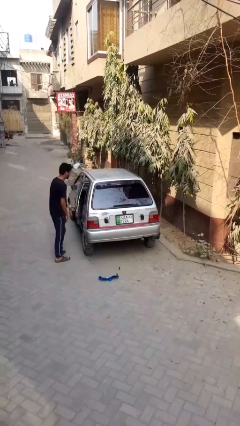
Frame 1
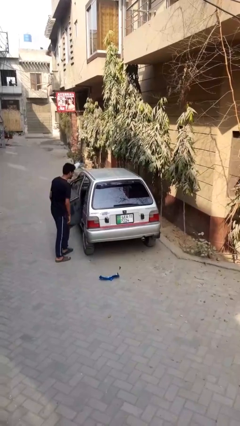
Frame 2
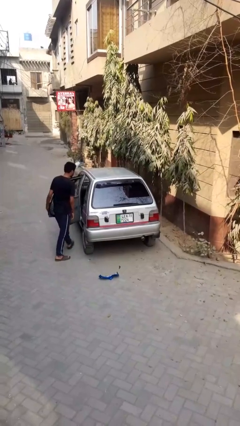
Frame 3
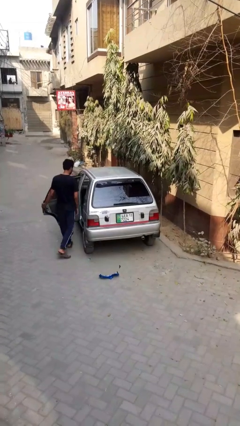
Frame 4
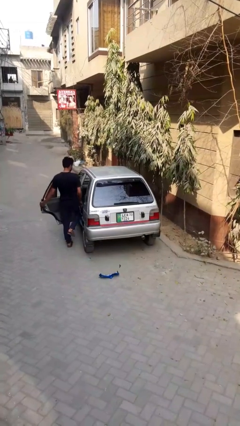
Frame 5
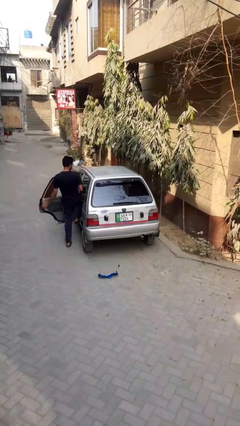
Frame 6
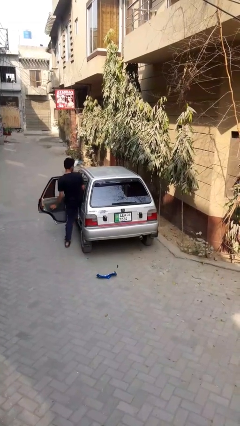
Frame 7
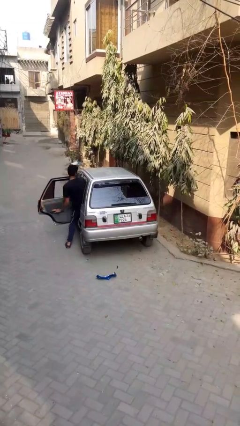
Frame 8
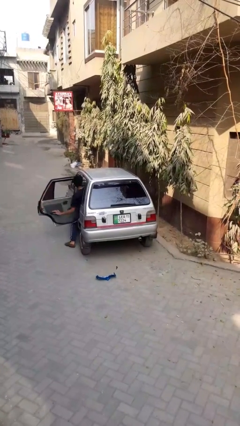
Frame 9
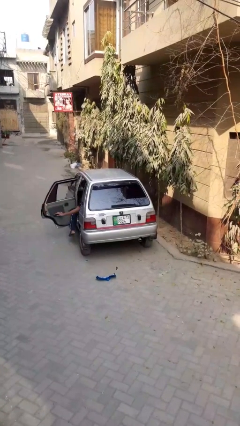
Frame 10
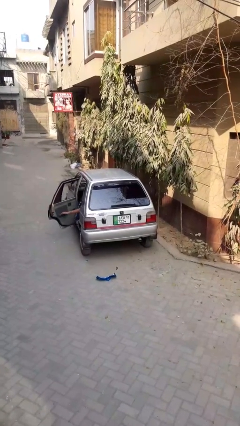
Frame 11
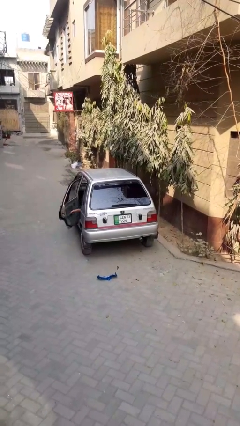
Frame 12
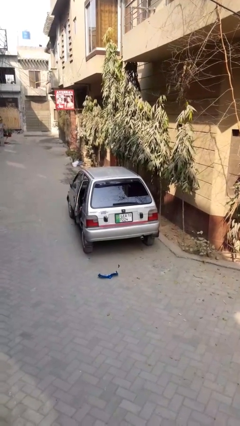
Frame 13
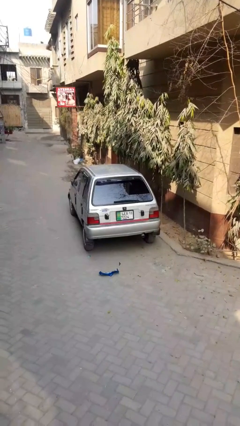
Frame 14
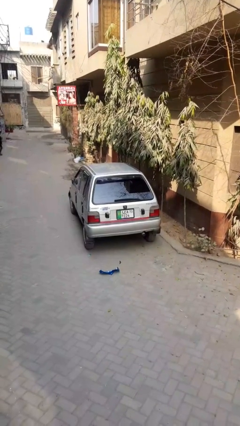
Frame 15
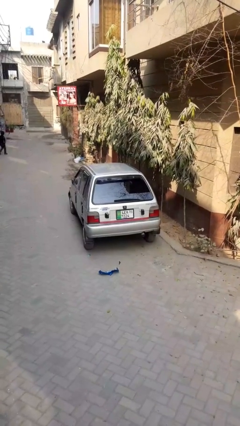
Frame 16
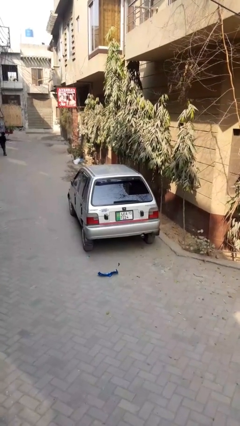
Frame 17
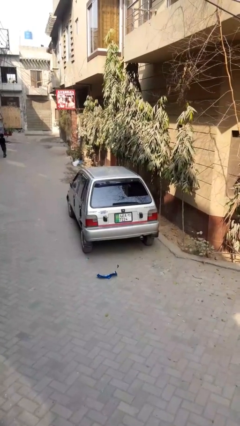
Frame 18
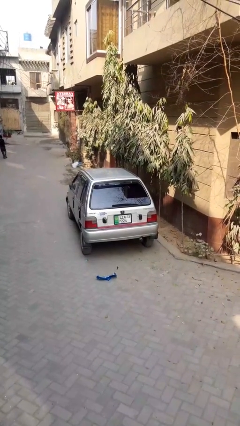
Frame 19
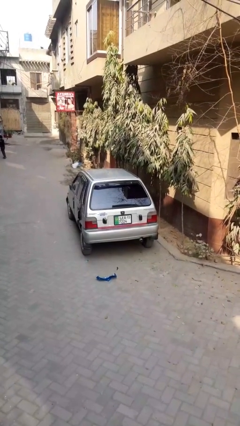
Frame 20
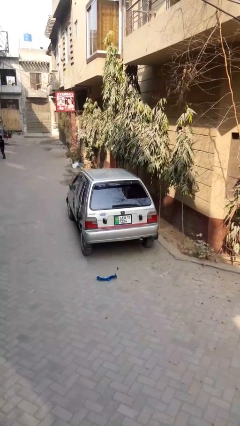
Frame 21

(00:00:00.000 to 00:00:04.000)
car picks up person

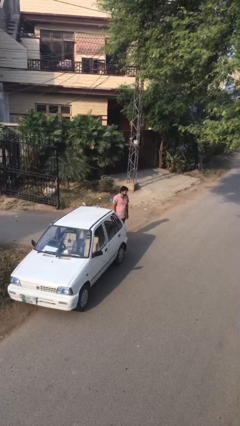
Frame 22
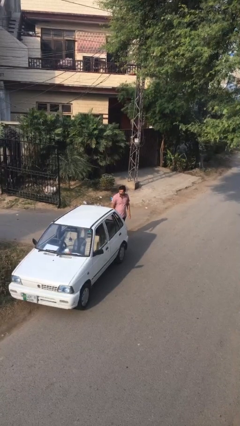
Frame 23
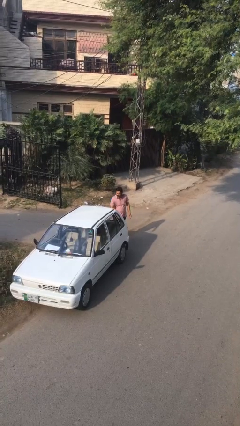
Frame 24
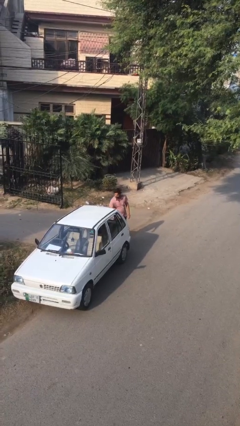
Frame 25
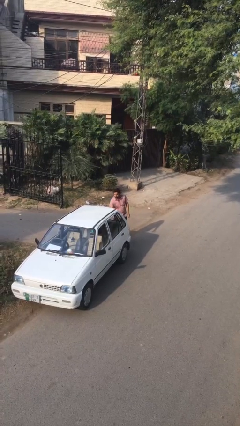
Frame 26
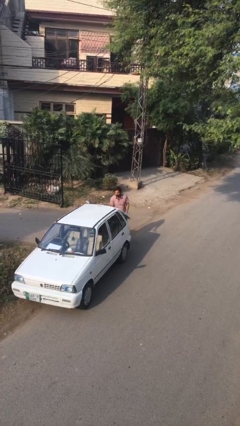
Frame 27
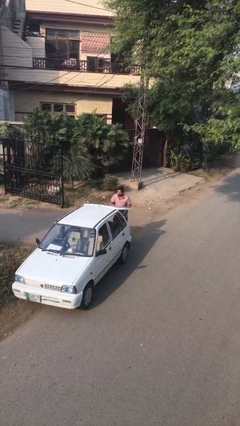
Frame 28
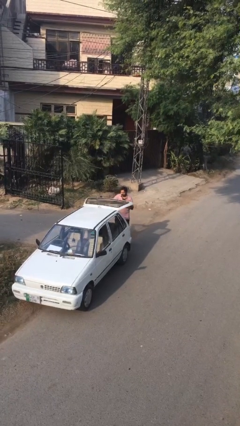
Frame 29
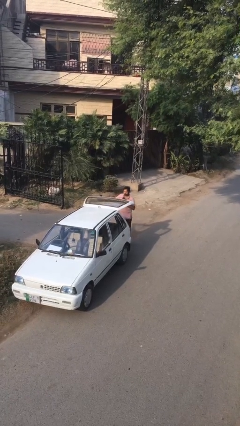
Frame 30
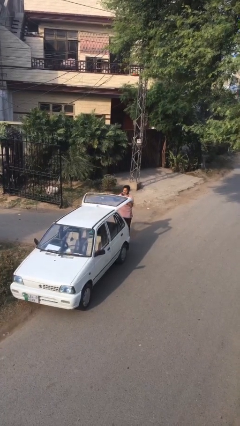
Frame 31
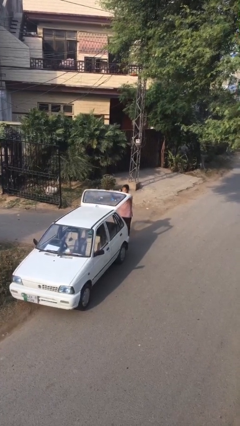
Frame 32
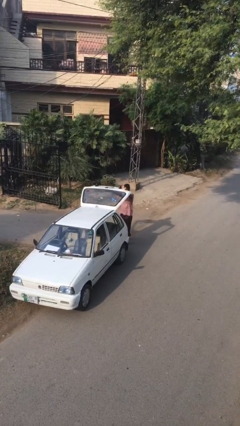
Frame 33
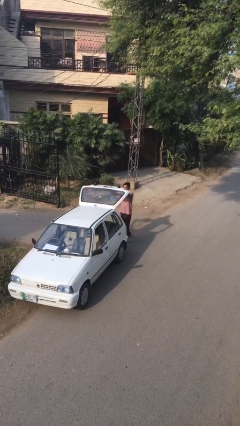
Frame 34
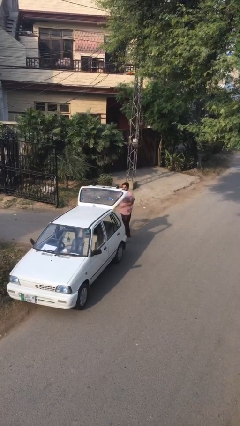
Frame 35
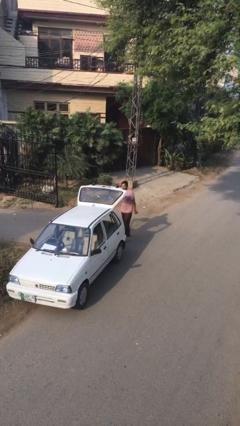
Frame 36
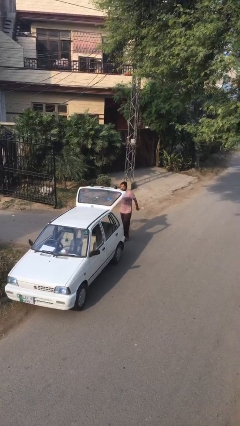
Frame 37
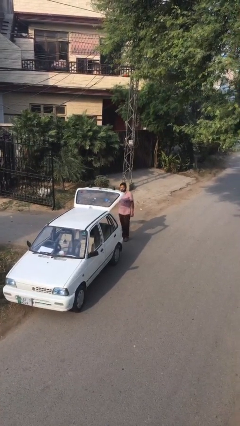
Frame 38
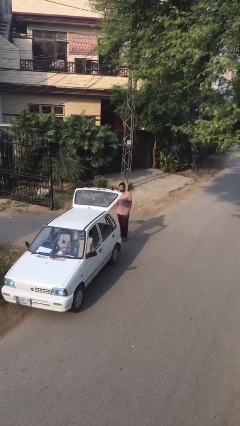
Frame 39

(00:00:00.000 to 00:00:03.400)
person opens car trunk

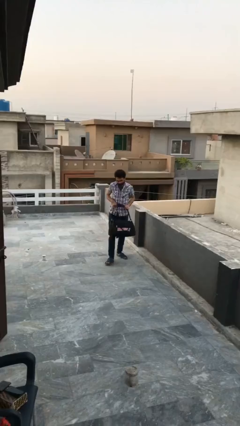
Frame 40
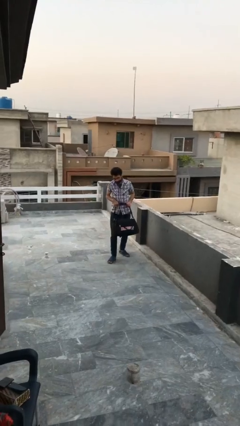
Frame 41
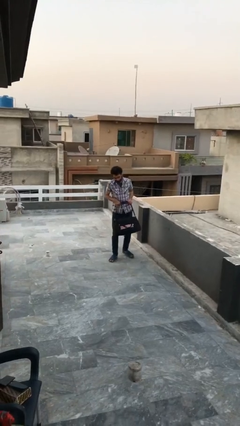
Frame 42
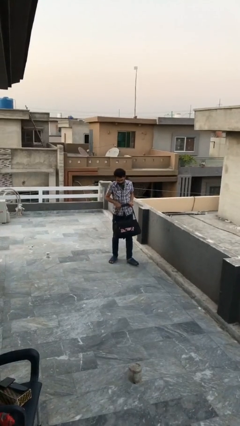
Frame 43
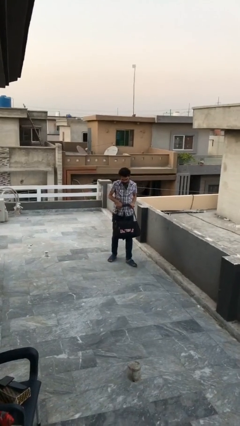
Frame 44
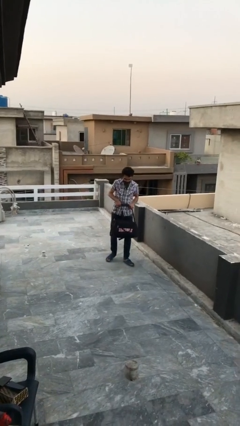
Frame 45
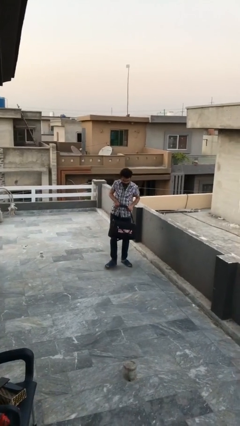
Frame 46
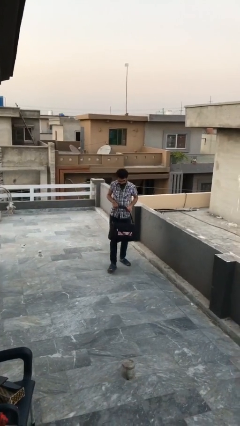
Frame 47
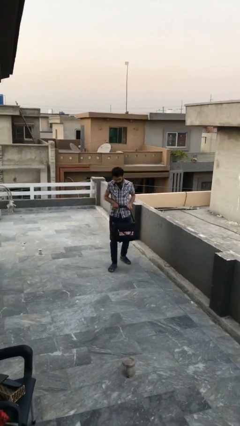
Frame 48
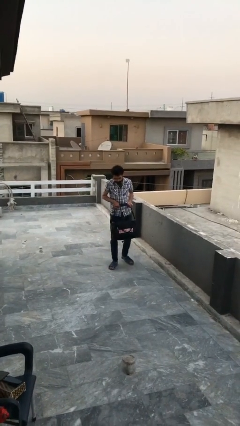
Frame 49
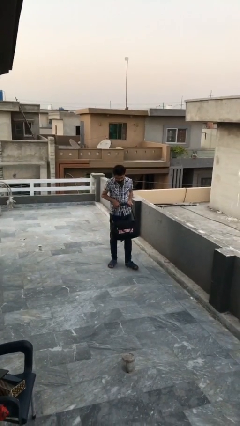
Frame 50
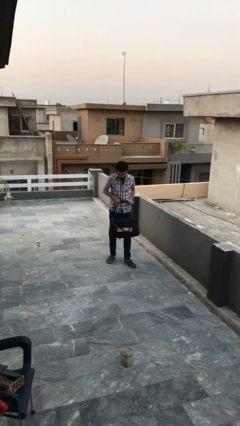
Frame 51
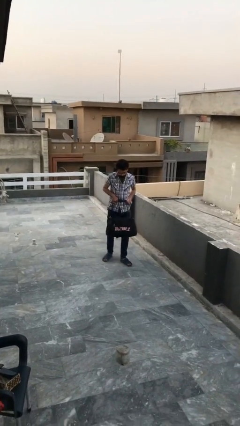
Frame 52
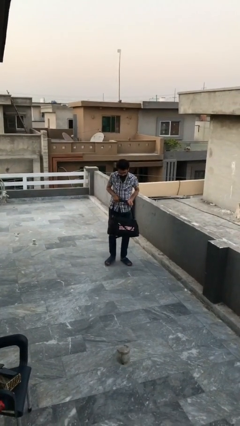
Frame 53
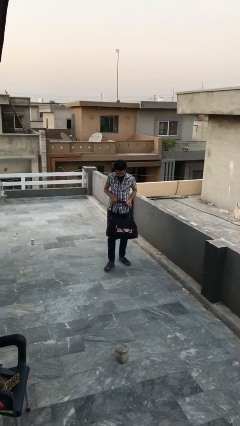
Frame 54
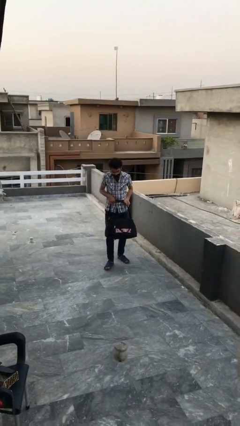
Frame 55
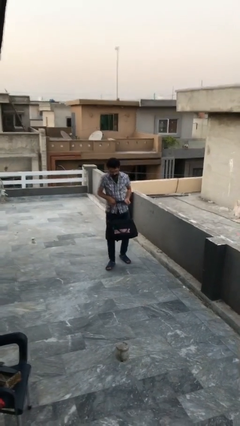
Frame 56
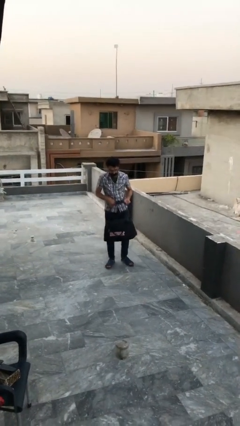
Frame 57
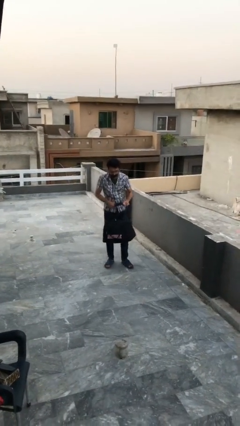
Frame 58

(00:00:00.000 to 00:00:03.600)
person carries heavy object

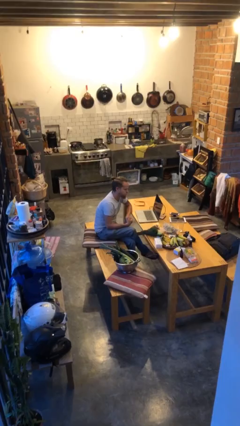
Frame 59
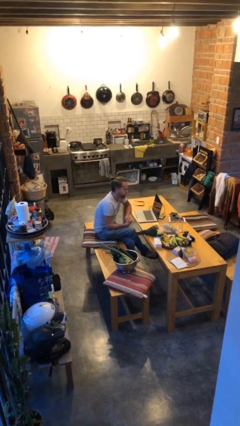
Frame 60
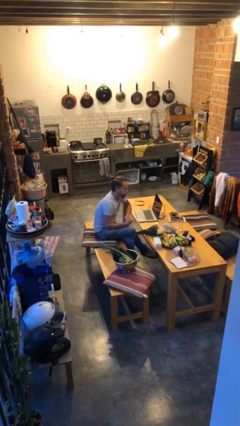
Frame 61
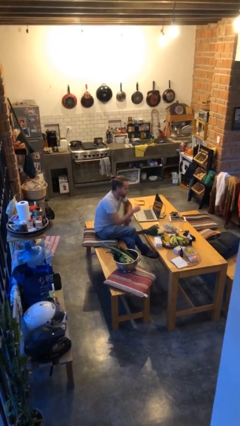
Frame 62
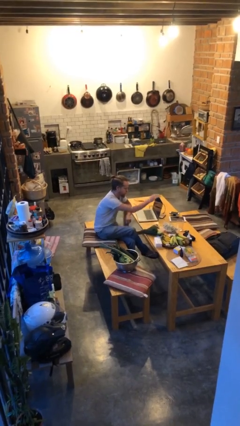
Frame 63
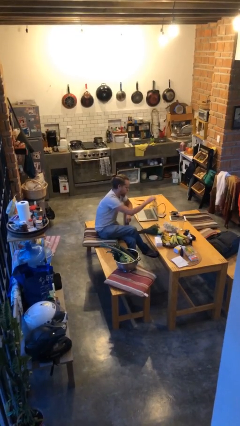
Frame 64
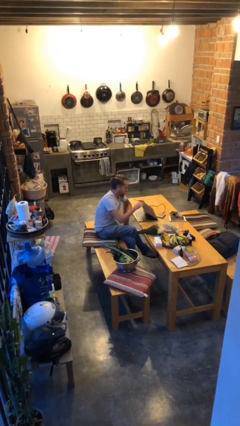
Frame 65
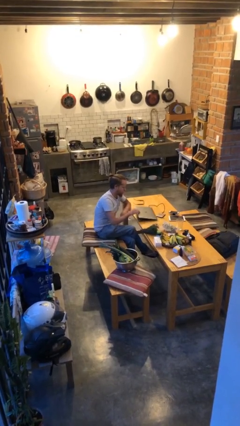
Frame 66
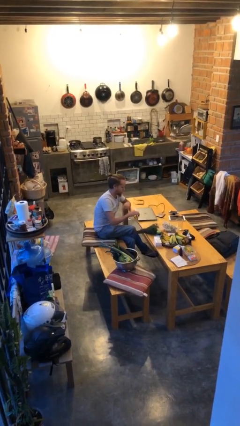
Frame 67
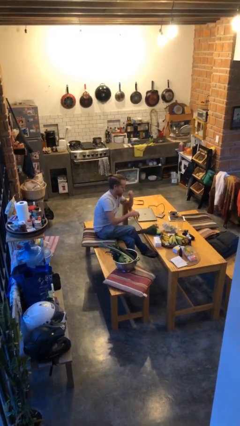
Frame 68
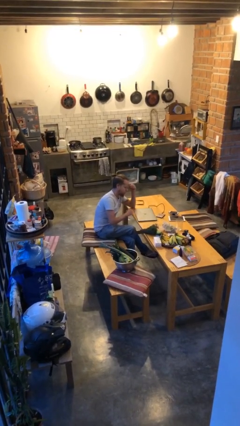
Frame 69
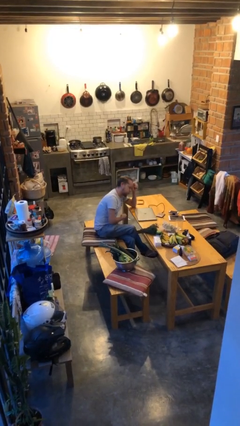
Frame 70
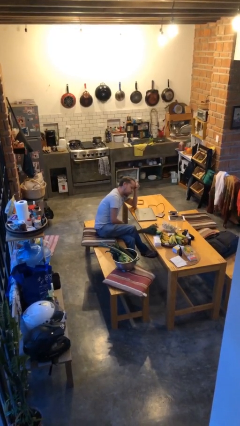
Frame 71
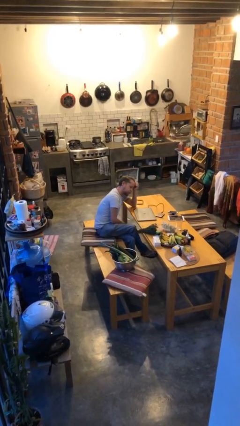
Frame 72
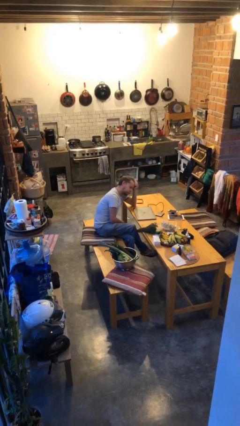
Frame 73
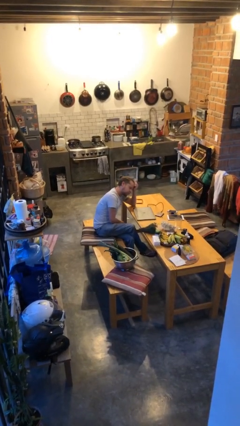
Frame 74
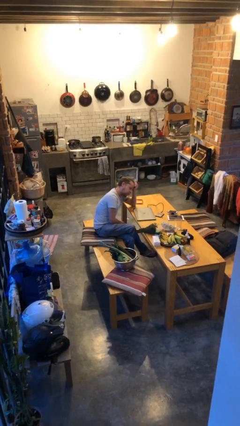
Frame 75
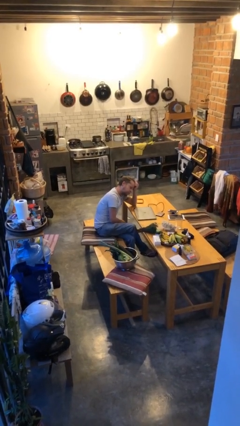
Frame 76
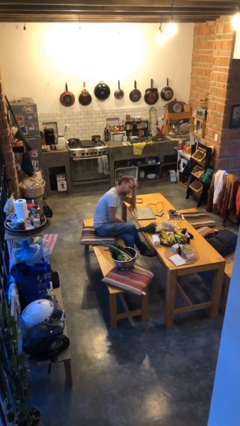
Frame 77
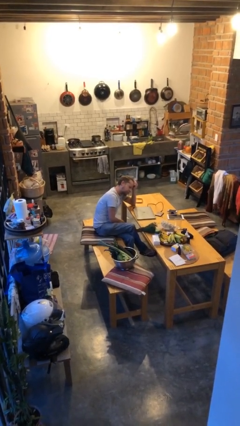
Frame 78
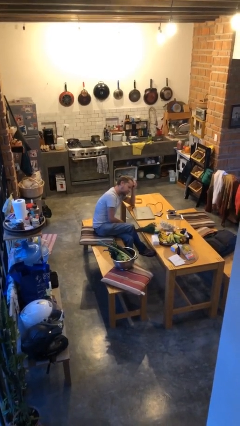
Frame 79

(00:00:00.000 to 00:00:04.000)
person closes laptop

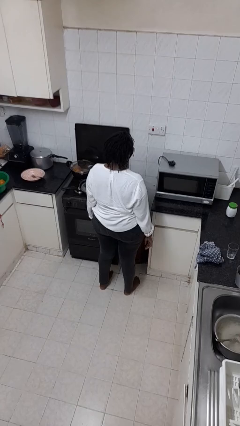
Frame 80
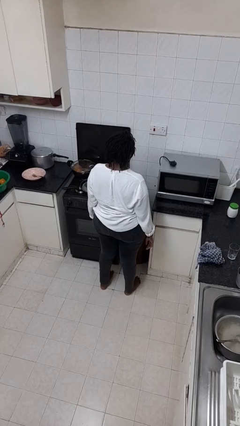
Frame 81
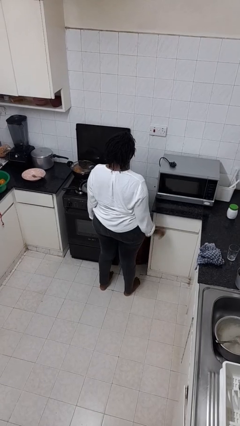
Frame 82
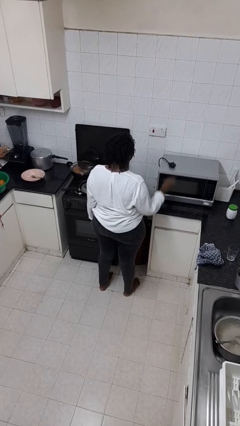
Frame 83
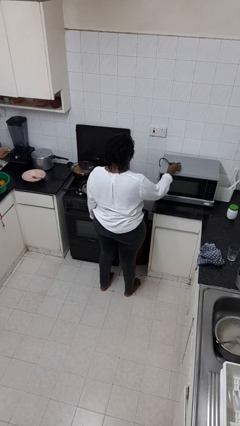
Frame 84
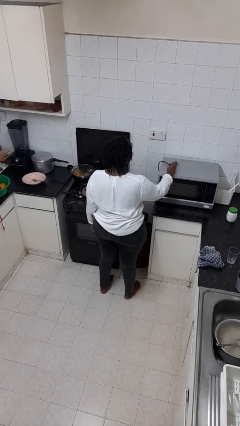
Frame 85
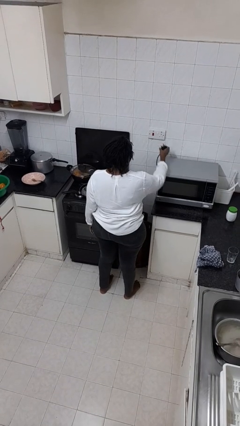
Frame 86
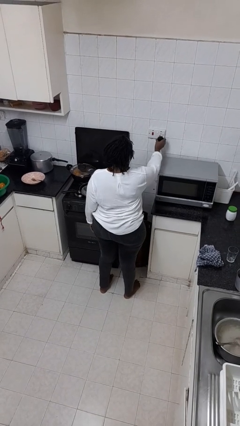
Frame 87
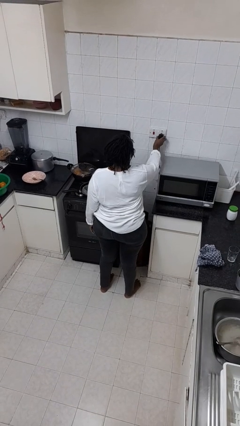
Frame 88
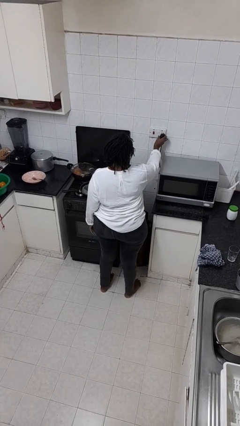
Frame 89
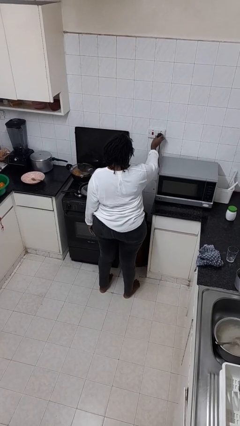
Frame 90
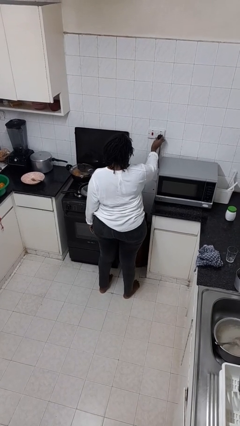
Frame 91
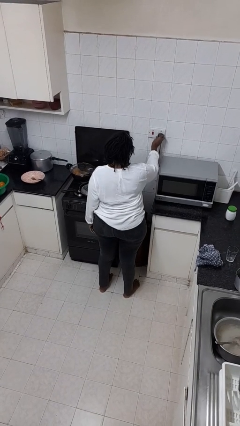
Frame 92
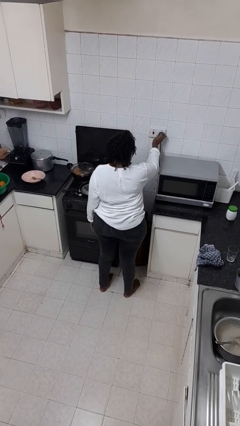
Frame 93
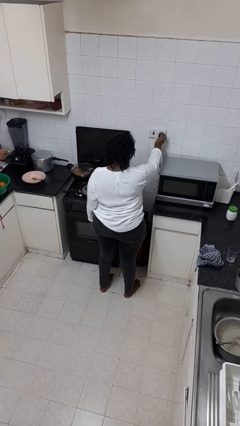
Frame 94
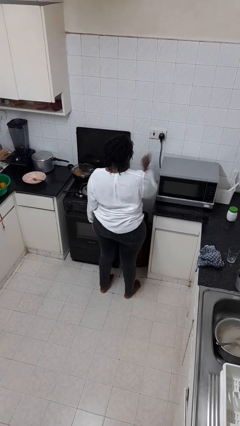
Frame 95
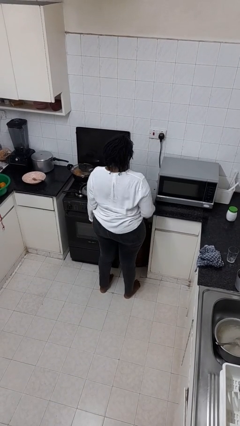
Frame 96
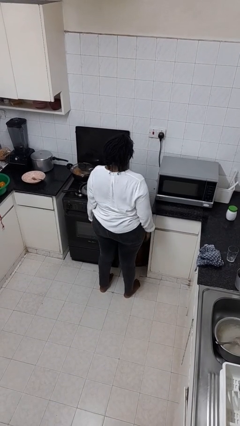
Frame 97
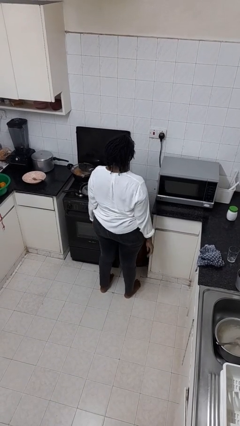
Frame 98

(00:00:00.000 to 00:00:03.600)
person plugs into electrical socket
